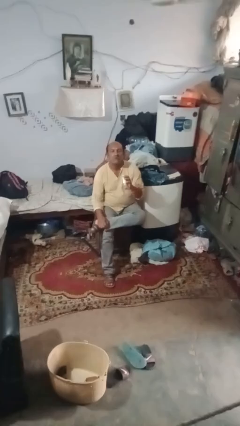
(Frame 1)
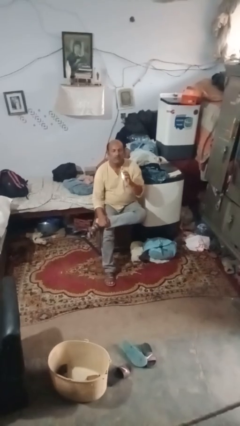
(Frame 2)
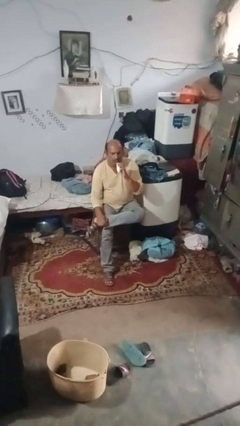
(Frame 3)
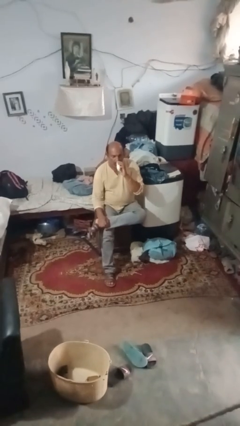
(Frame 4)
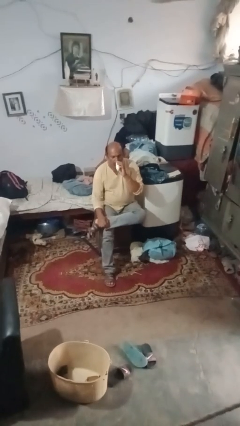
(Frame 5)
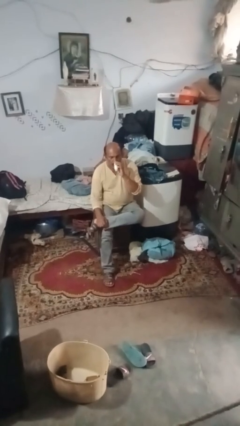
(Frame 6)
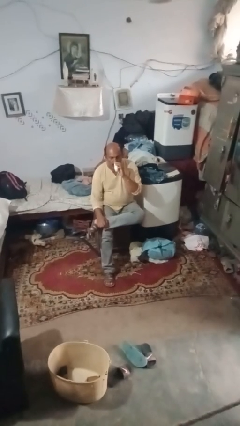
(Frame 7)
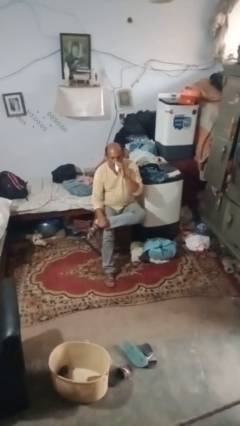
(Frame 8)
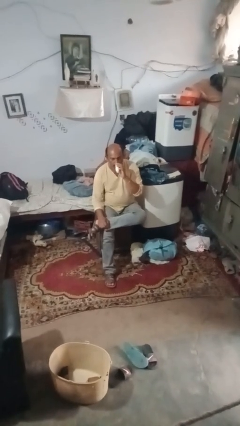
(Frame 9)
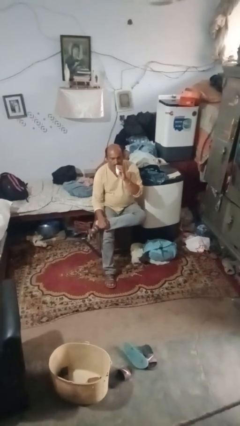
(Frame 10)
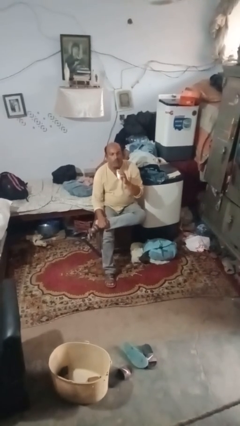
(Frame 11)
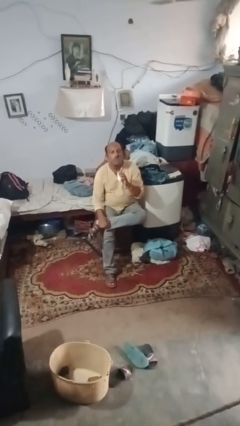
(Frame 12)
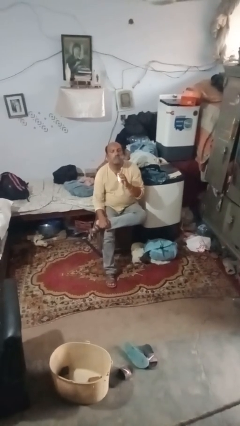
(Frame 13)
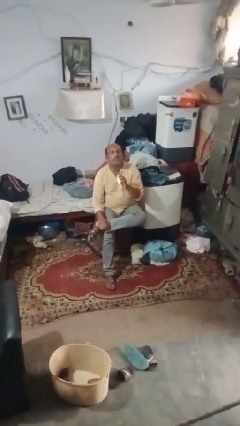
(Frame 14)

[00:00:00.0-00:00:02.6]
person vapes

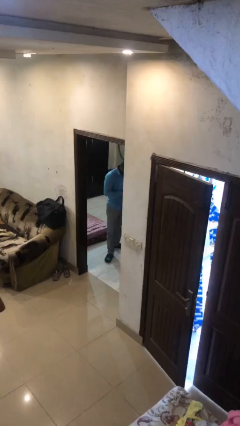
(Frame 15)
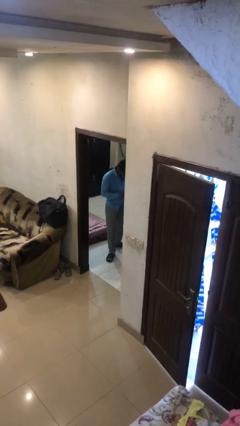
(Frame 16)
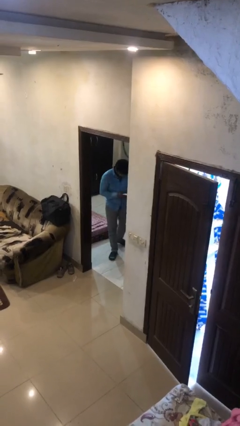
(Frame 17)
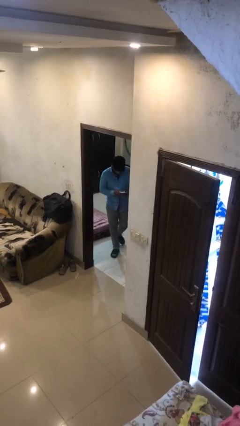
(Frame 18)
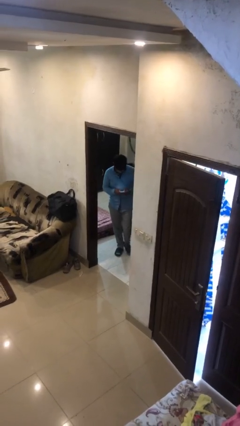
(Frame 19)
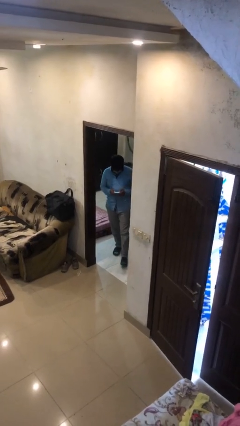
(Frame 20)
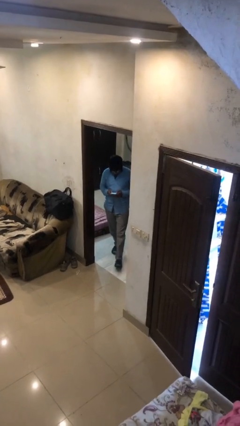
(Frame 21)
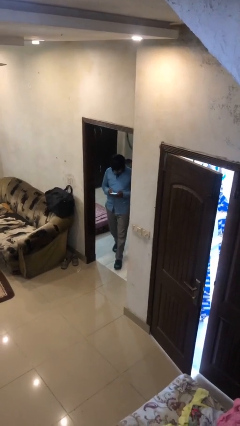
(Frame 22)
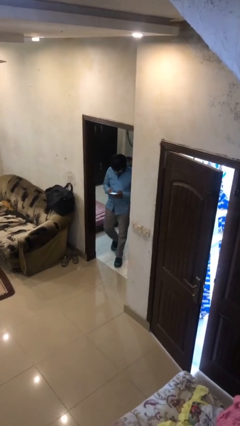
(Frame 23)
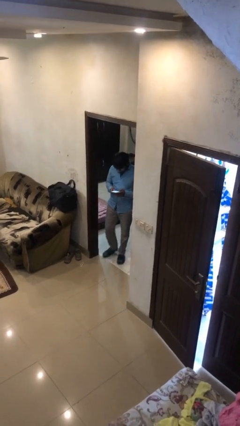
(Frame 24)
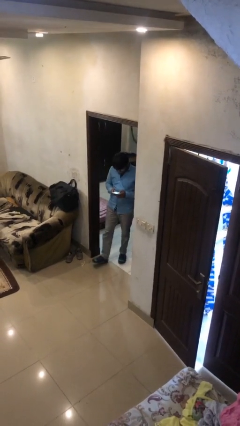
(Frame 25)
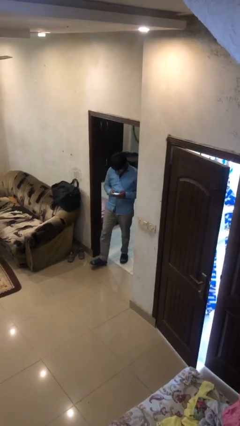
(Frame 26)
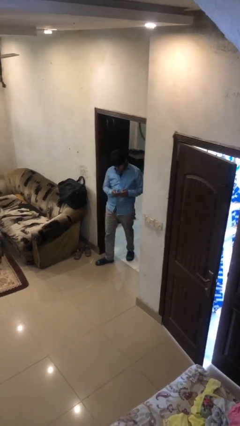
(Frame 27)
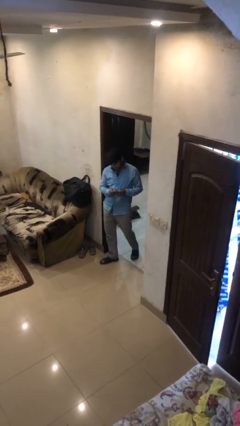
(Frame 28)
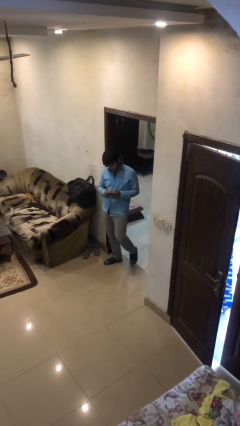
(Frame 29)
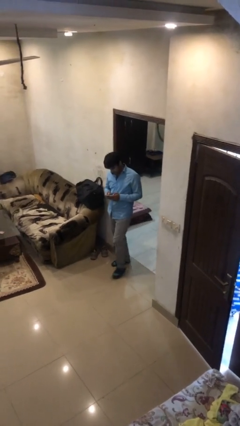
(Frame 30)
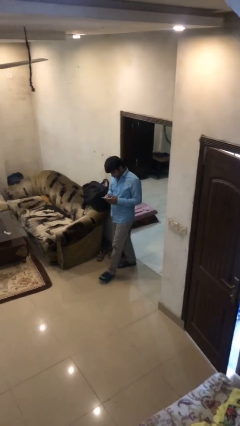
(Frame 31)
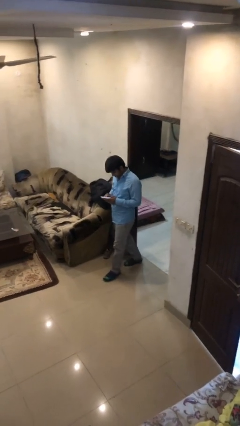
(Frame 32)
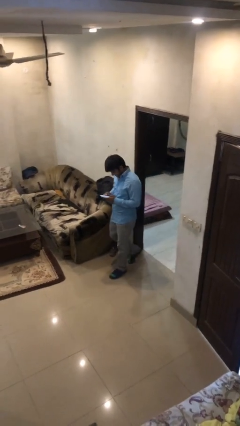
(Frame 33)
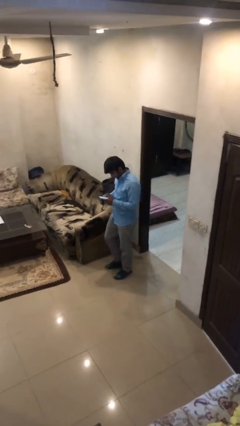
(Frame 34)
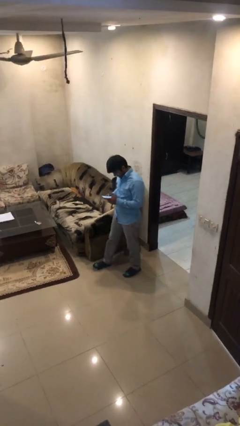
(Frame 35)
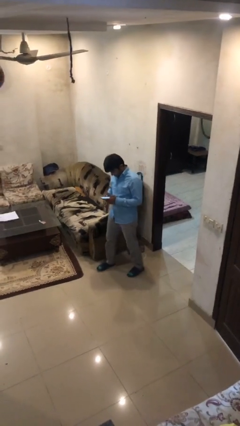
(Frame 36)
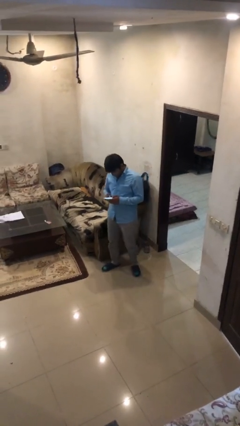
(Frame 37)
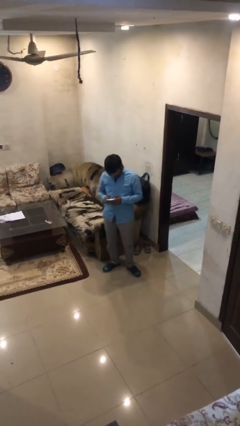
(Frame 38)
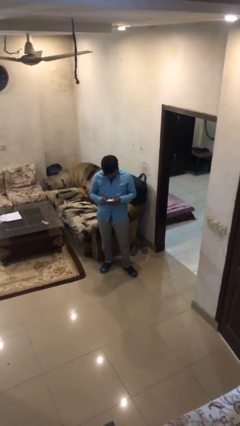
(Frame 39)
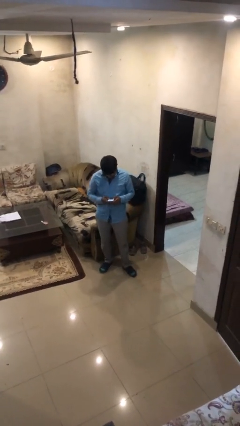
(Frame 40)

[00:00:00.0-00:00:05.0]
person enters scene through structure

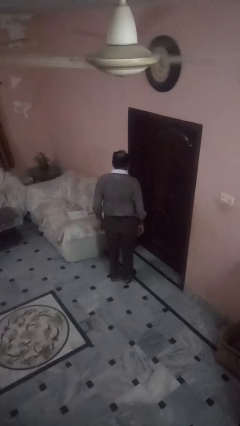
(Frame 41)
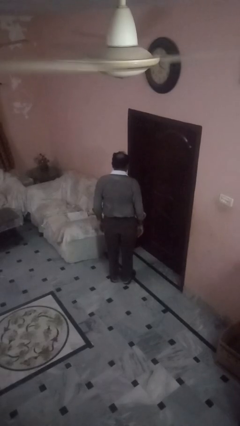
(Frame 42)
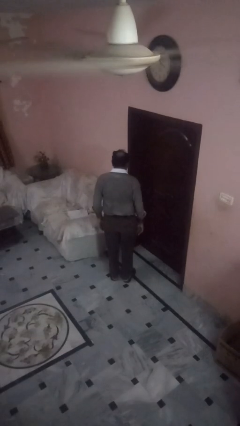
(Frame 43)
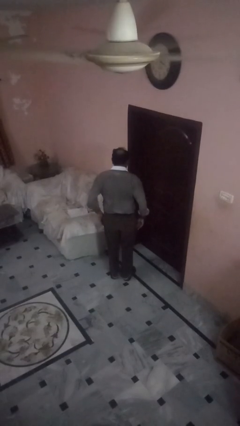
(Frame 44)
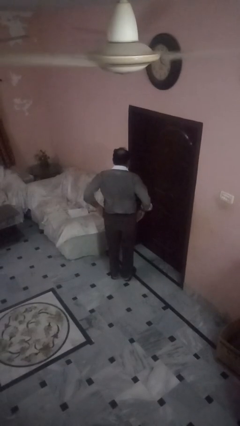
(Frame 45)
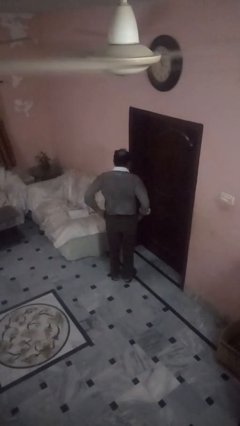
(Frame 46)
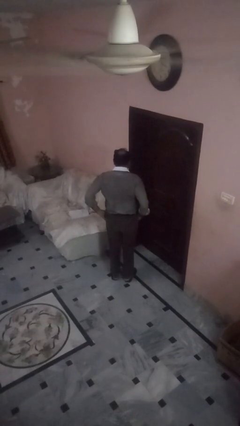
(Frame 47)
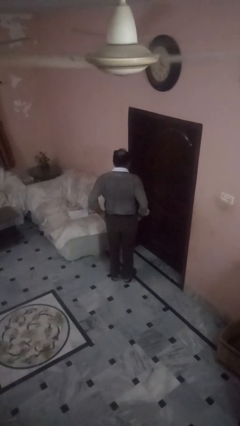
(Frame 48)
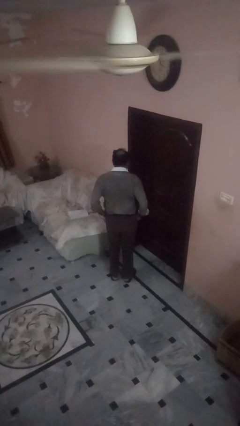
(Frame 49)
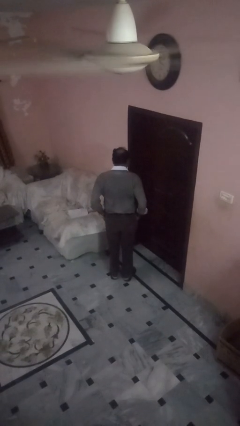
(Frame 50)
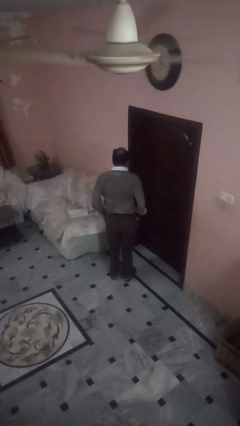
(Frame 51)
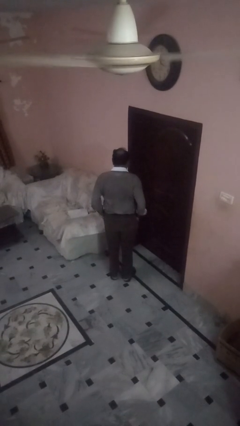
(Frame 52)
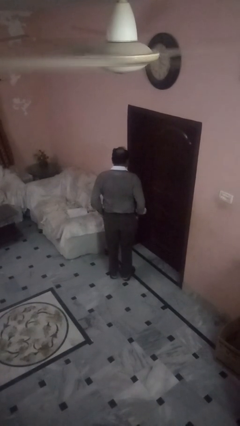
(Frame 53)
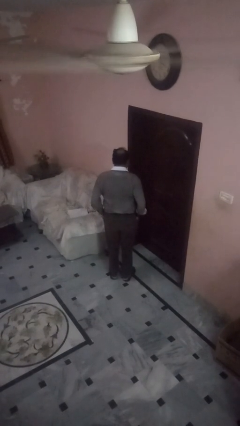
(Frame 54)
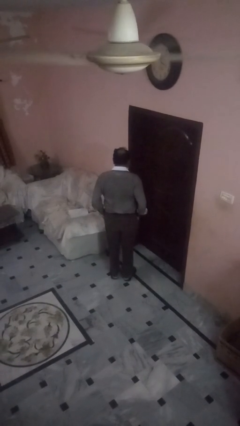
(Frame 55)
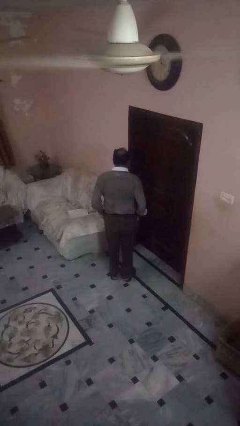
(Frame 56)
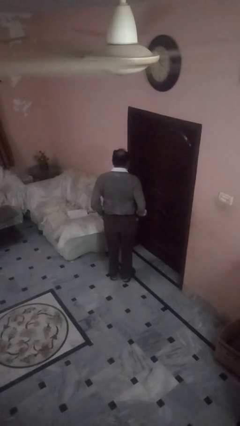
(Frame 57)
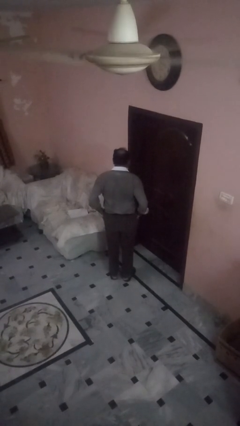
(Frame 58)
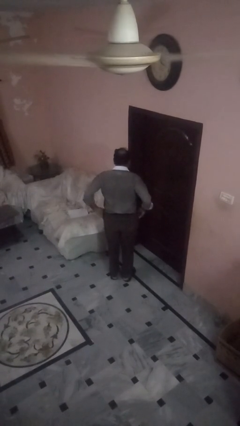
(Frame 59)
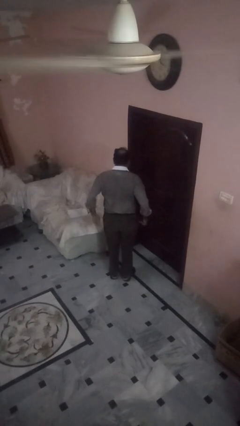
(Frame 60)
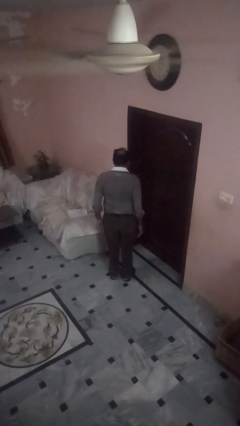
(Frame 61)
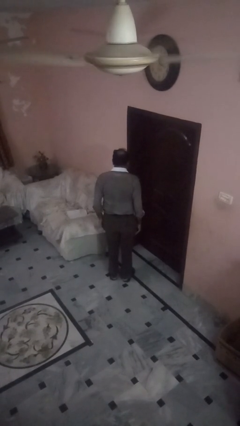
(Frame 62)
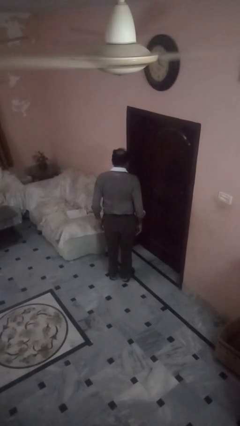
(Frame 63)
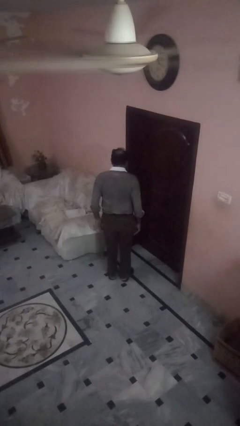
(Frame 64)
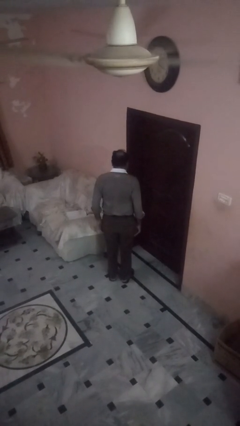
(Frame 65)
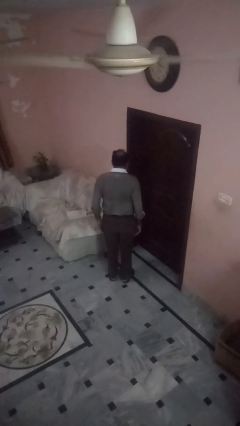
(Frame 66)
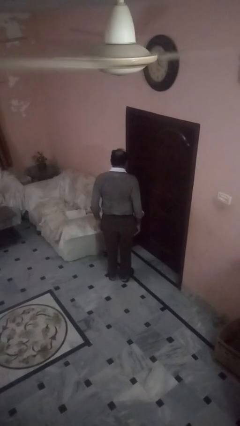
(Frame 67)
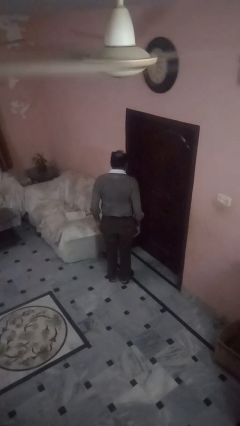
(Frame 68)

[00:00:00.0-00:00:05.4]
person puts hands in back pockets

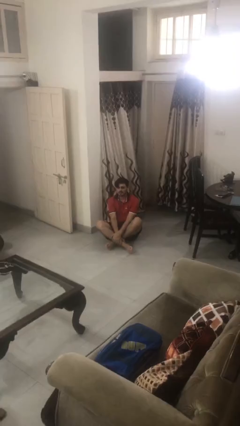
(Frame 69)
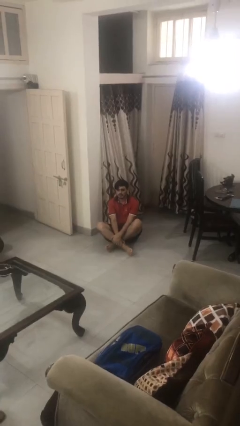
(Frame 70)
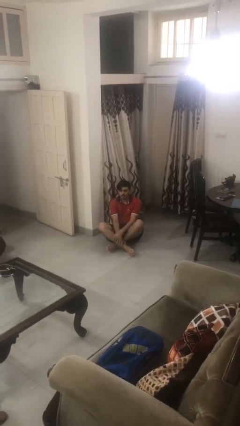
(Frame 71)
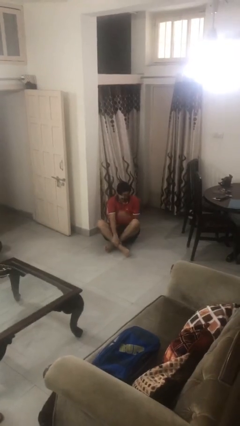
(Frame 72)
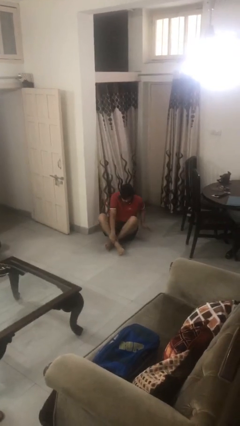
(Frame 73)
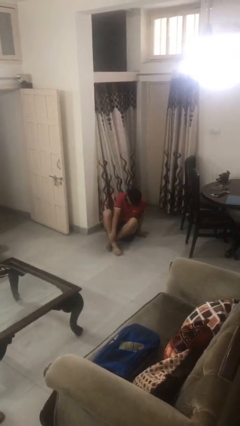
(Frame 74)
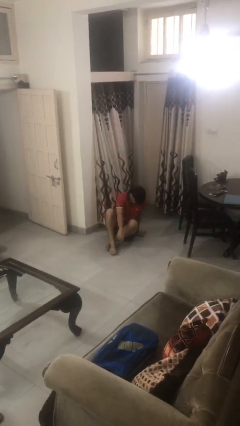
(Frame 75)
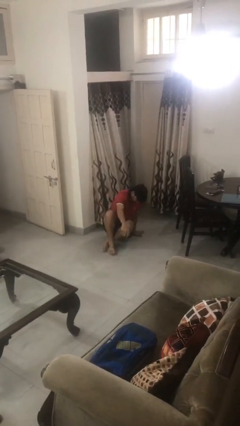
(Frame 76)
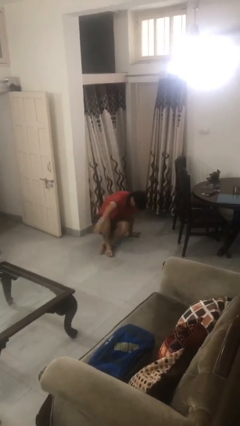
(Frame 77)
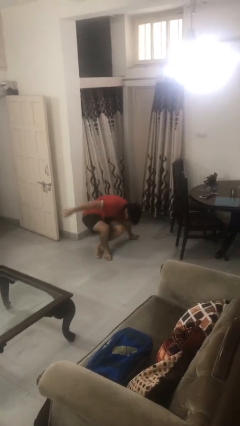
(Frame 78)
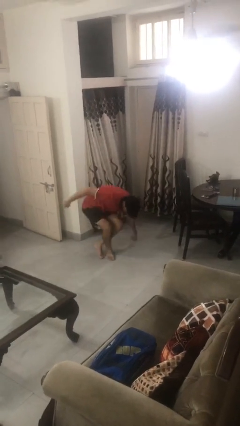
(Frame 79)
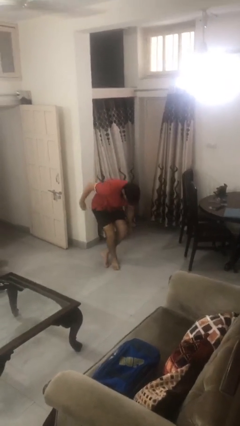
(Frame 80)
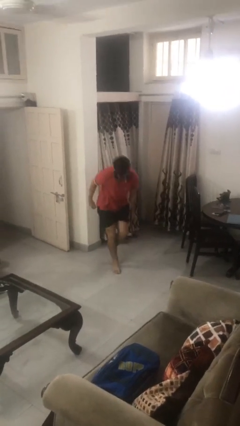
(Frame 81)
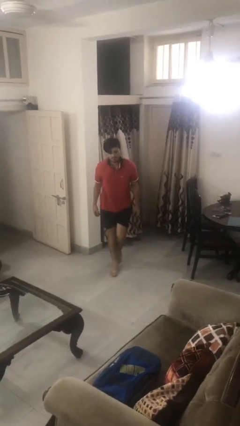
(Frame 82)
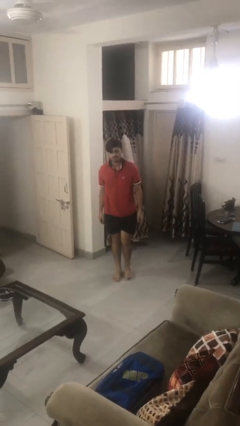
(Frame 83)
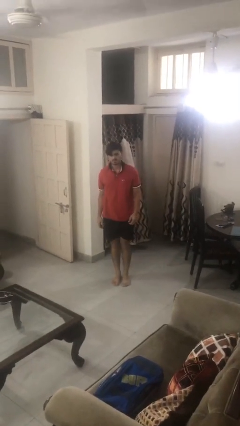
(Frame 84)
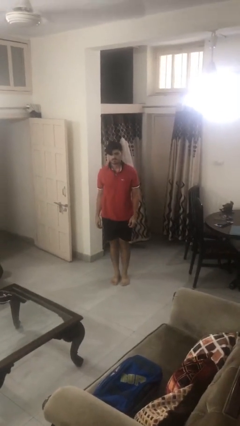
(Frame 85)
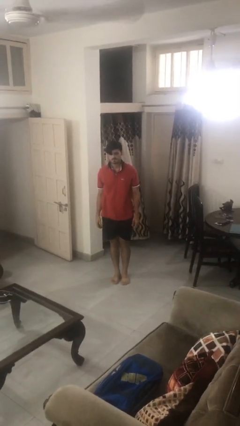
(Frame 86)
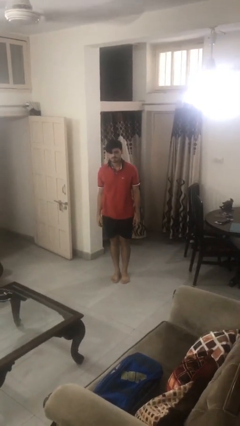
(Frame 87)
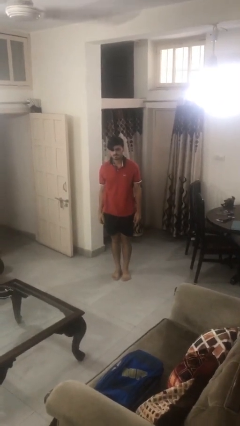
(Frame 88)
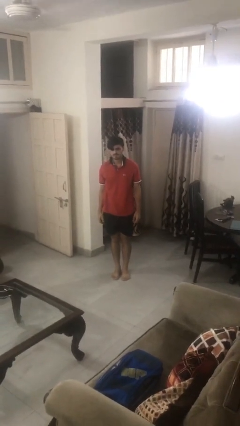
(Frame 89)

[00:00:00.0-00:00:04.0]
person stands up from floor

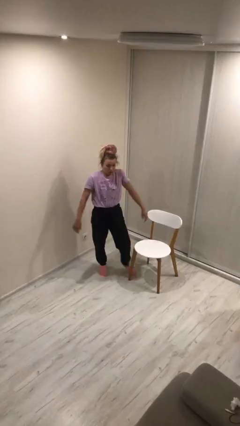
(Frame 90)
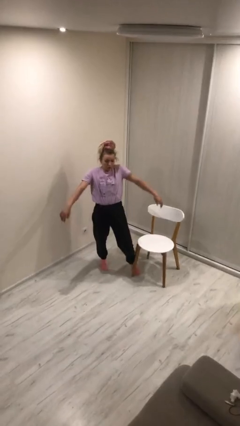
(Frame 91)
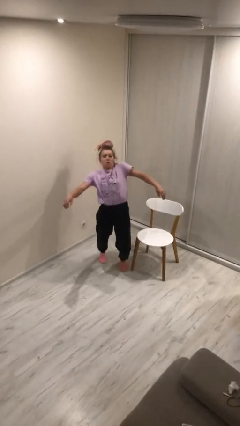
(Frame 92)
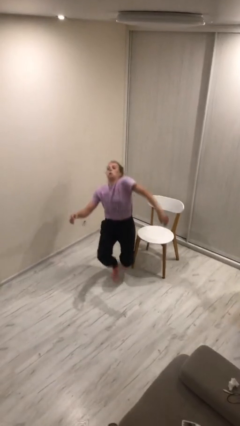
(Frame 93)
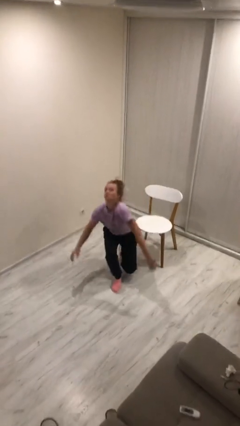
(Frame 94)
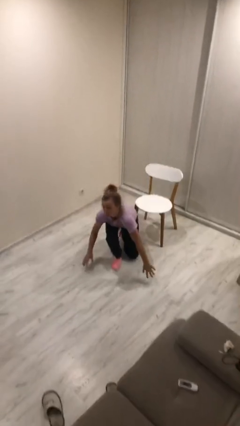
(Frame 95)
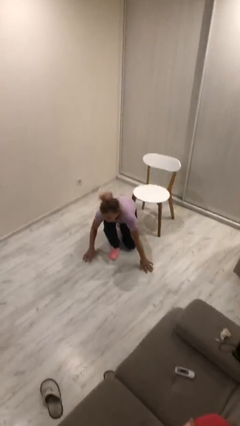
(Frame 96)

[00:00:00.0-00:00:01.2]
person trips on object on floor
